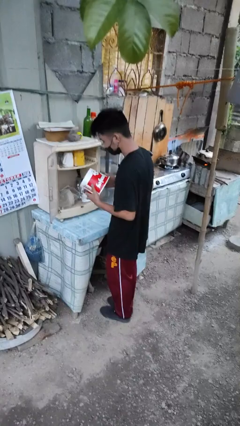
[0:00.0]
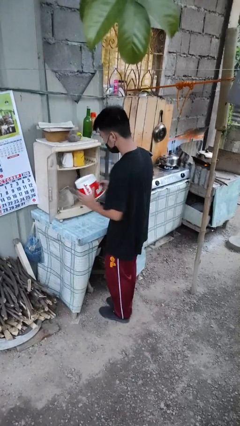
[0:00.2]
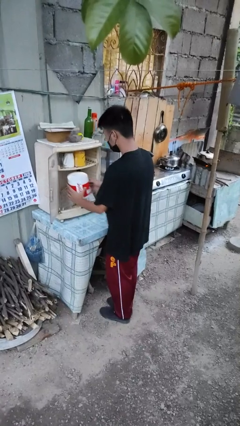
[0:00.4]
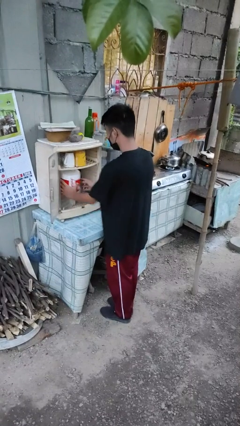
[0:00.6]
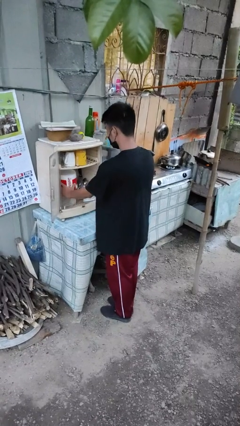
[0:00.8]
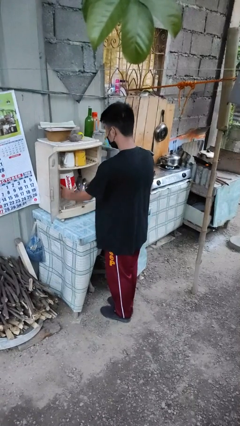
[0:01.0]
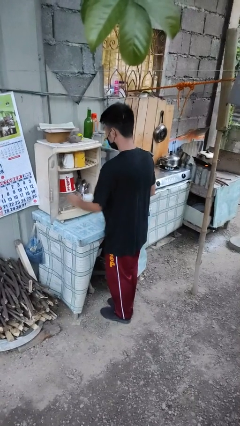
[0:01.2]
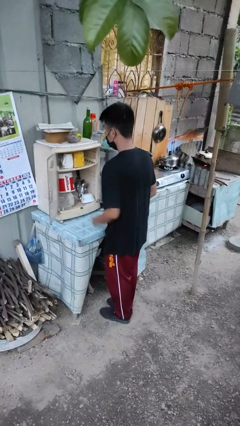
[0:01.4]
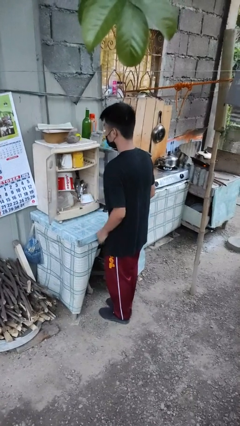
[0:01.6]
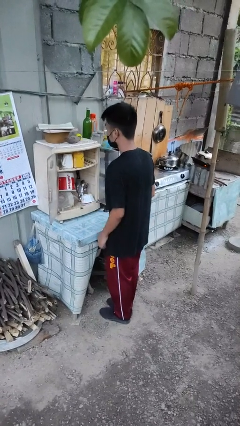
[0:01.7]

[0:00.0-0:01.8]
person puts down object into cabinet

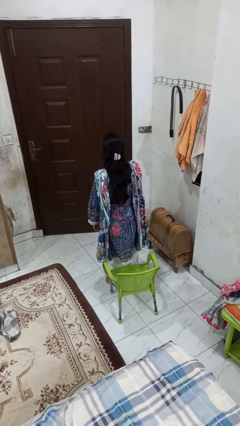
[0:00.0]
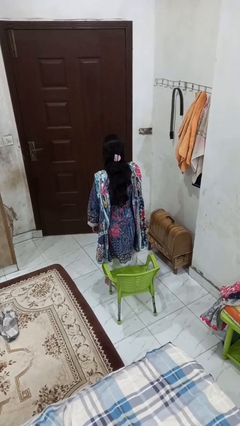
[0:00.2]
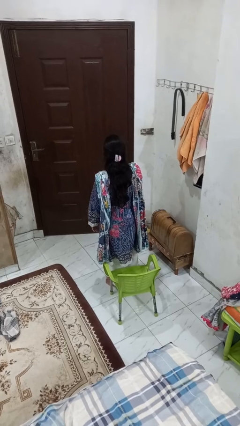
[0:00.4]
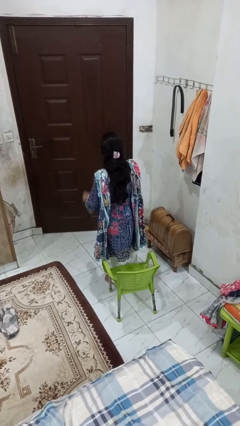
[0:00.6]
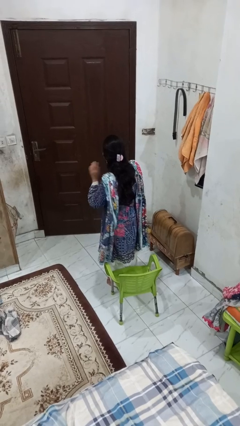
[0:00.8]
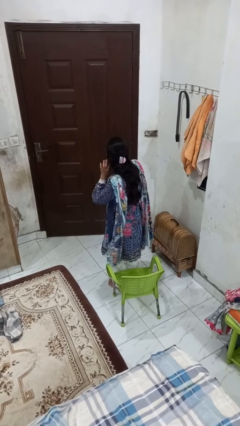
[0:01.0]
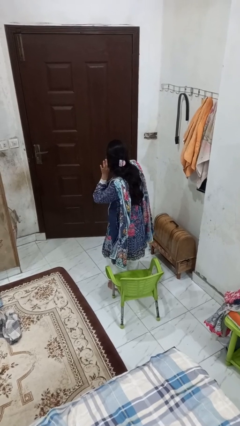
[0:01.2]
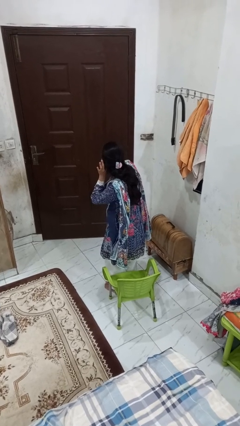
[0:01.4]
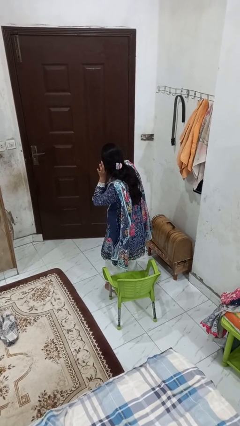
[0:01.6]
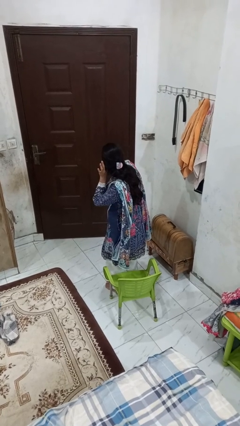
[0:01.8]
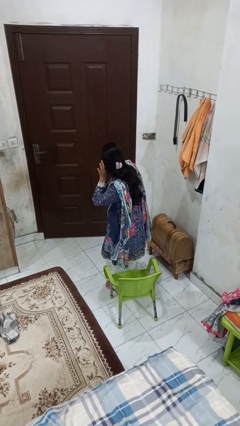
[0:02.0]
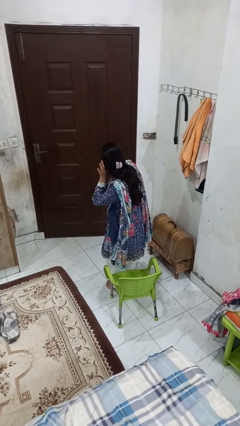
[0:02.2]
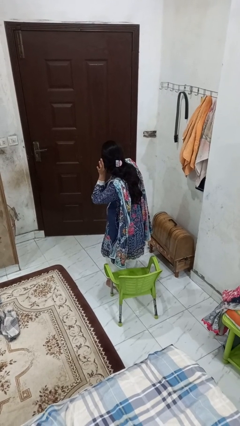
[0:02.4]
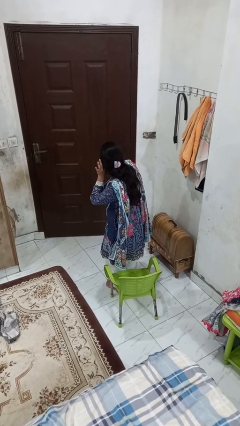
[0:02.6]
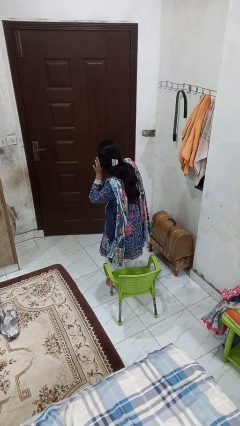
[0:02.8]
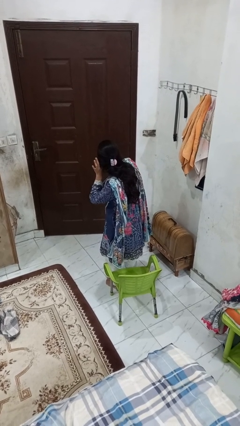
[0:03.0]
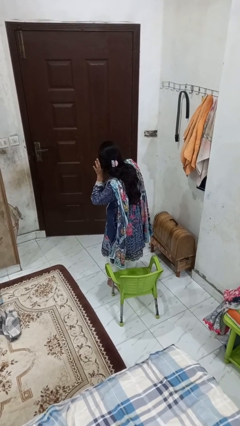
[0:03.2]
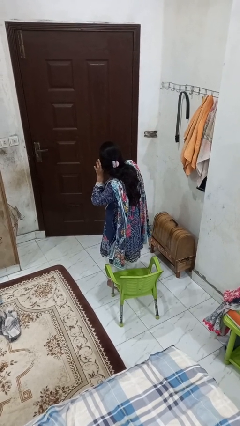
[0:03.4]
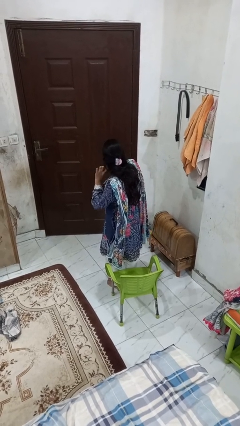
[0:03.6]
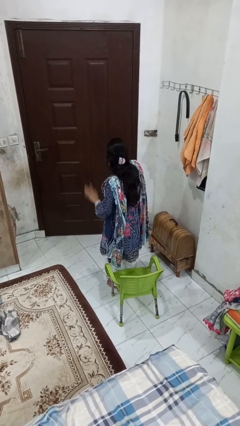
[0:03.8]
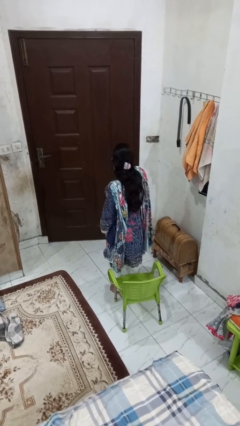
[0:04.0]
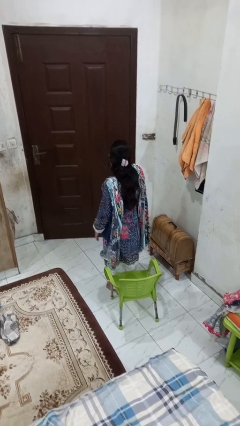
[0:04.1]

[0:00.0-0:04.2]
person gestures listen closely

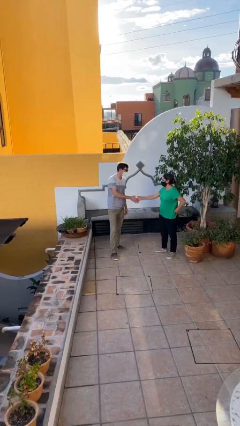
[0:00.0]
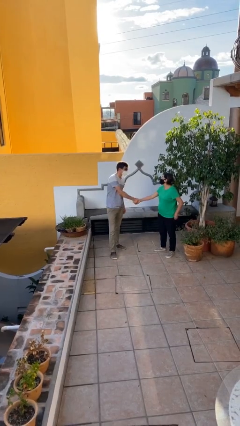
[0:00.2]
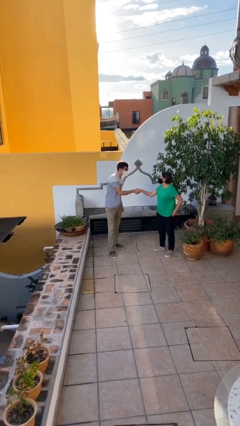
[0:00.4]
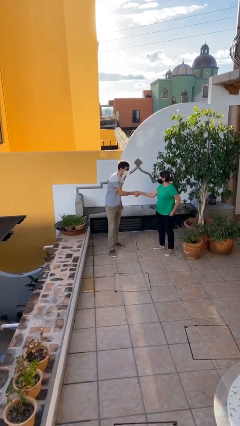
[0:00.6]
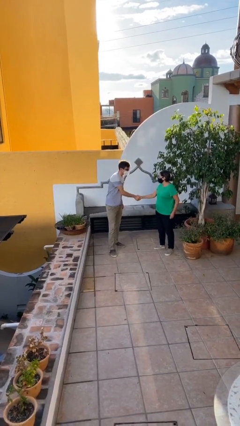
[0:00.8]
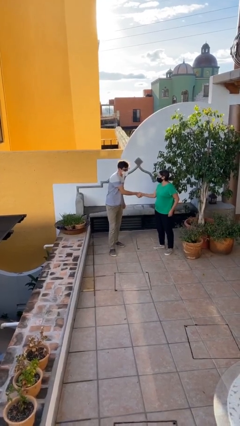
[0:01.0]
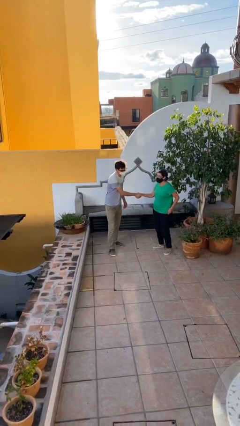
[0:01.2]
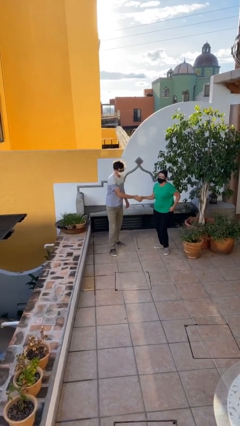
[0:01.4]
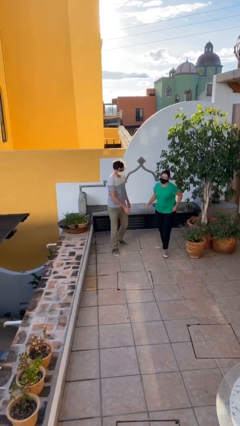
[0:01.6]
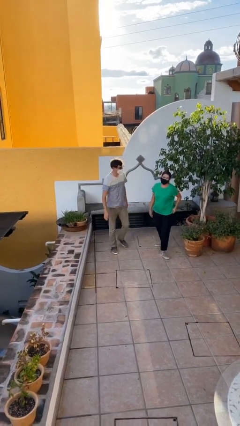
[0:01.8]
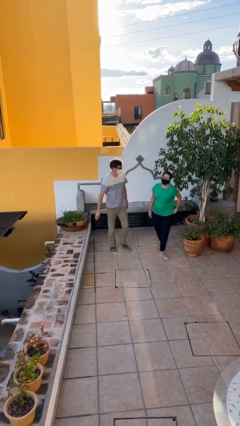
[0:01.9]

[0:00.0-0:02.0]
person shakes hand

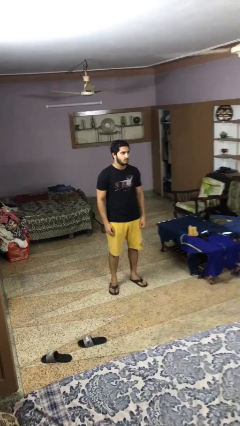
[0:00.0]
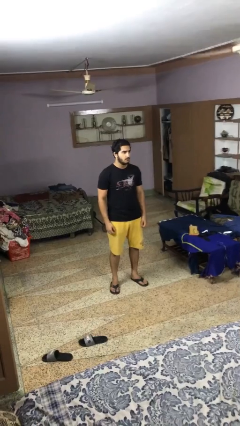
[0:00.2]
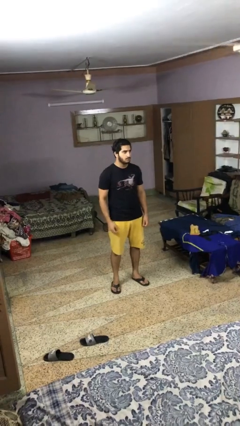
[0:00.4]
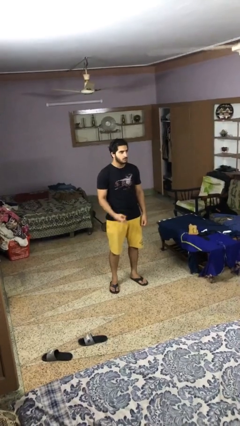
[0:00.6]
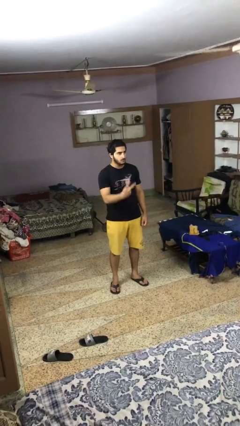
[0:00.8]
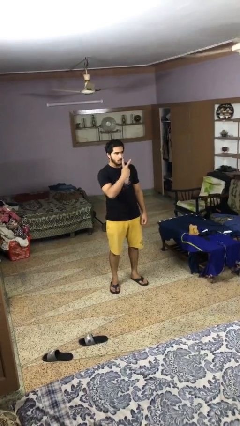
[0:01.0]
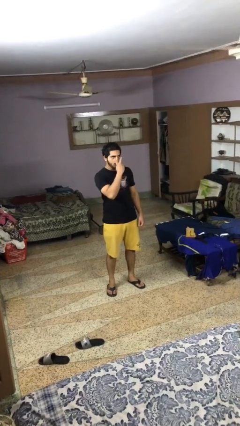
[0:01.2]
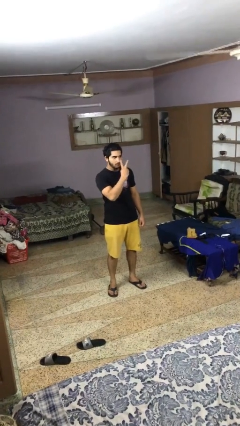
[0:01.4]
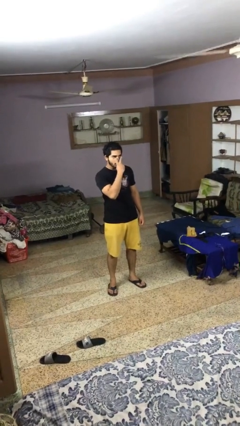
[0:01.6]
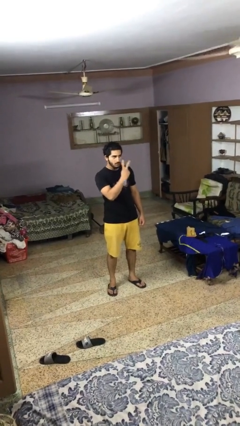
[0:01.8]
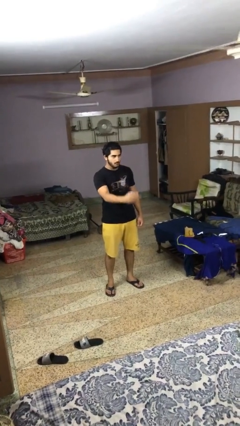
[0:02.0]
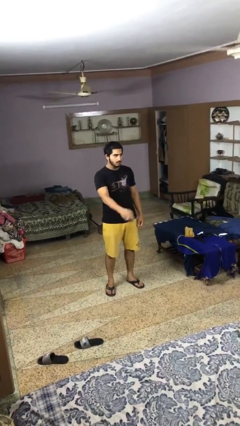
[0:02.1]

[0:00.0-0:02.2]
person gestures watch closely

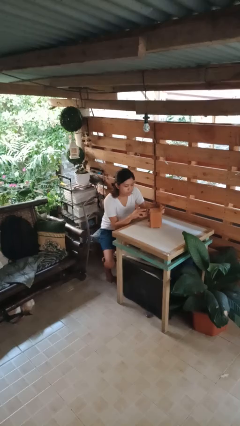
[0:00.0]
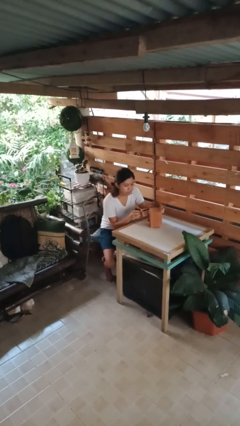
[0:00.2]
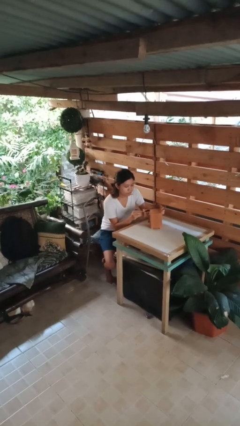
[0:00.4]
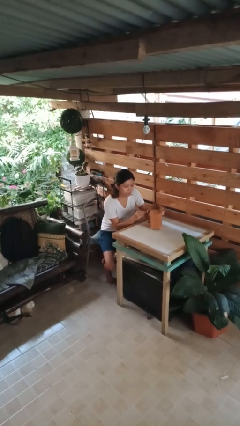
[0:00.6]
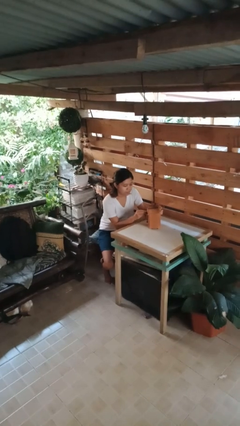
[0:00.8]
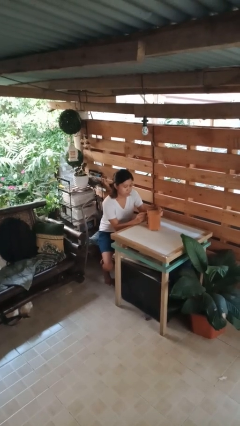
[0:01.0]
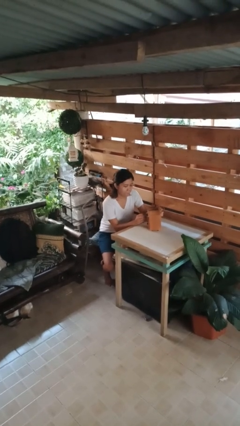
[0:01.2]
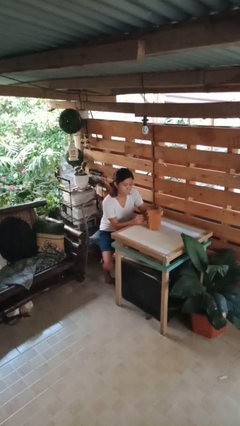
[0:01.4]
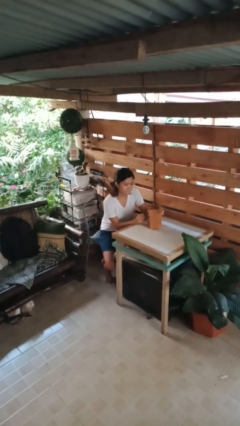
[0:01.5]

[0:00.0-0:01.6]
person closes jewelry box

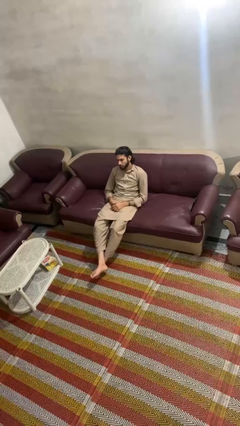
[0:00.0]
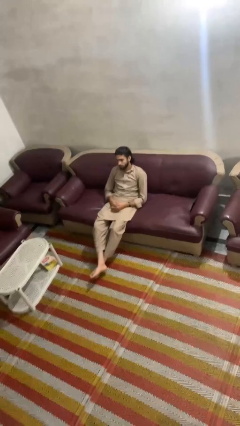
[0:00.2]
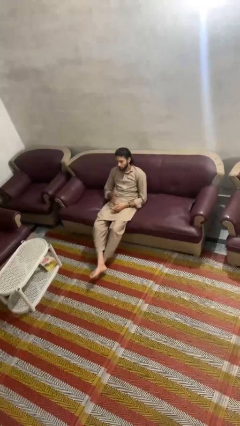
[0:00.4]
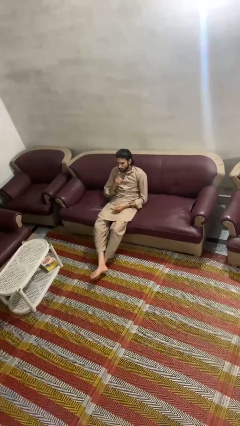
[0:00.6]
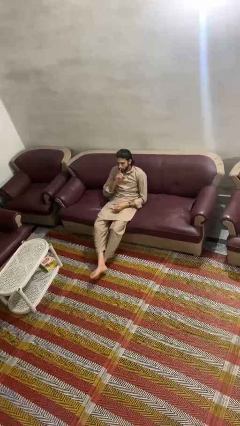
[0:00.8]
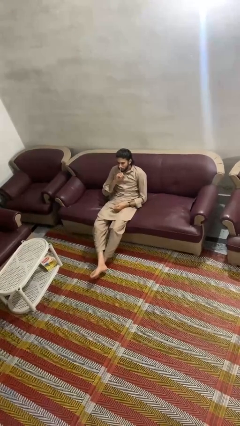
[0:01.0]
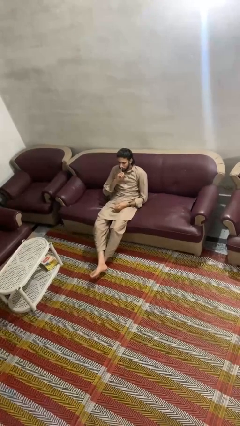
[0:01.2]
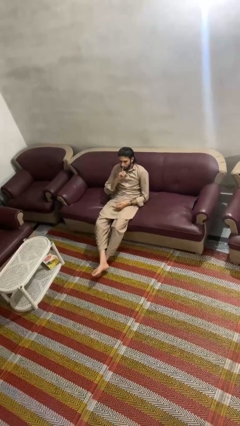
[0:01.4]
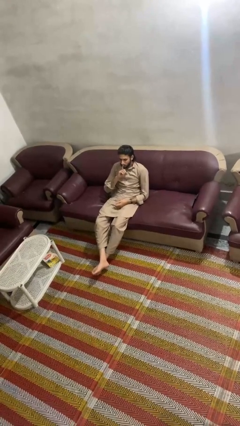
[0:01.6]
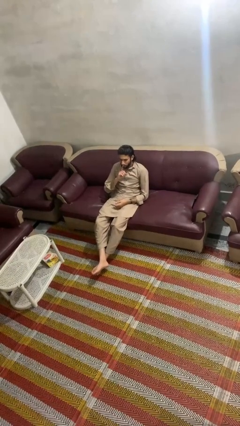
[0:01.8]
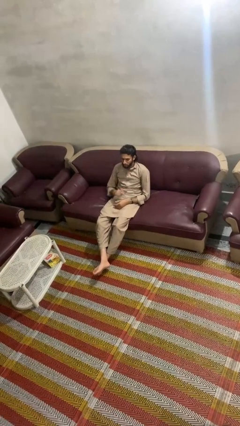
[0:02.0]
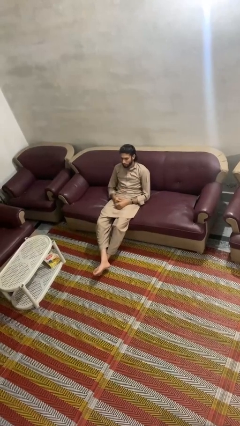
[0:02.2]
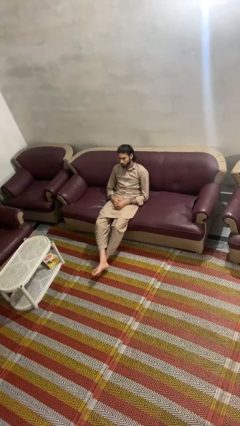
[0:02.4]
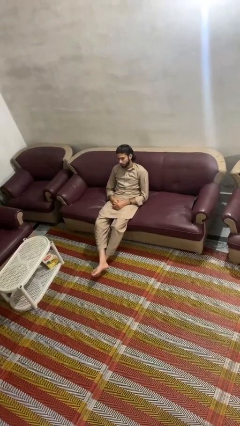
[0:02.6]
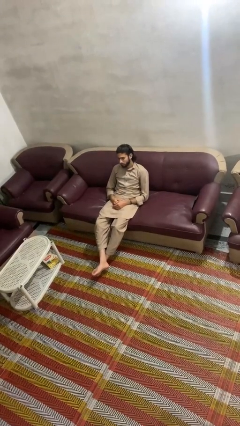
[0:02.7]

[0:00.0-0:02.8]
person gestures be quiet

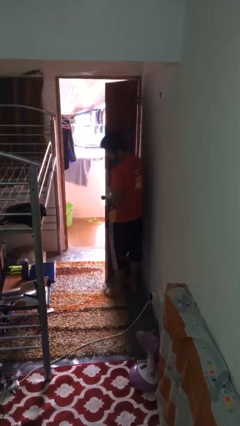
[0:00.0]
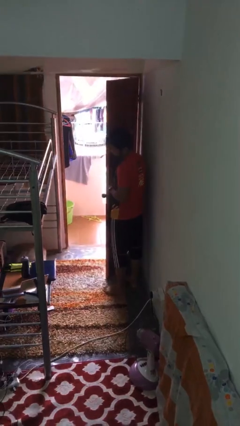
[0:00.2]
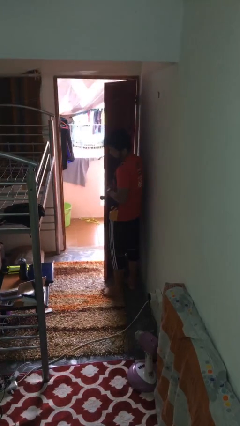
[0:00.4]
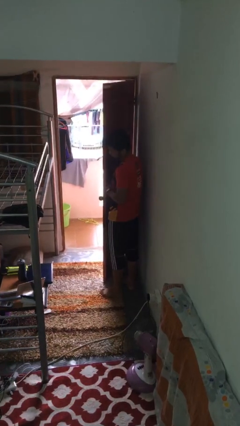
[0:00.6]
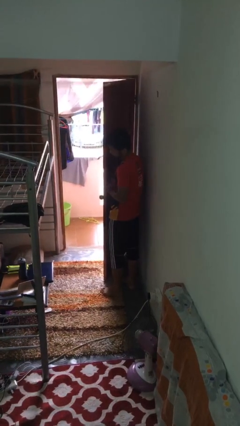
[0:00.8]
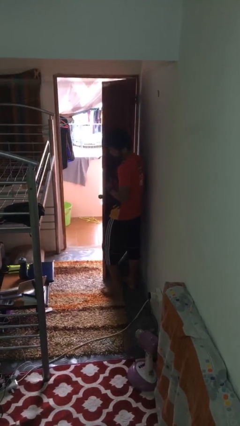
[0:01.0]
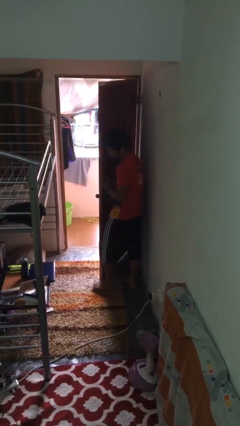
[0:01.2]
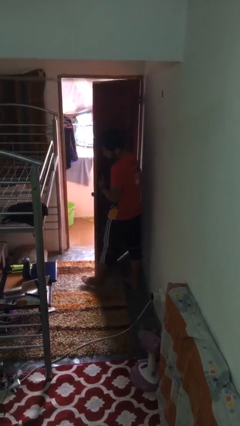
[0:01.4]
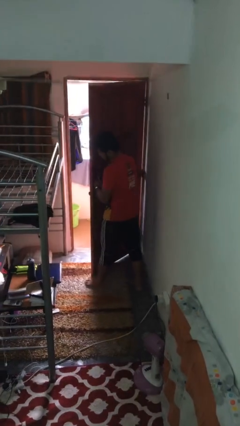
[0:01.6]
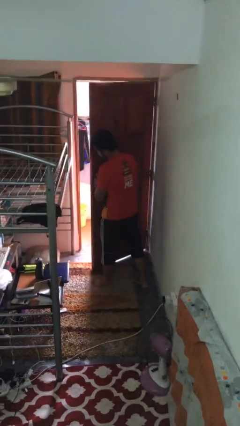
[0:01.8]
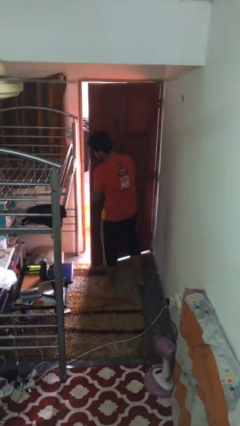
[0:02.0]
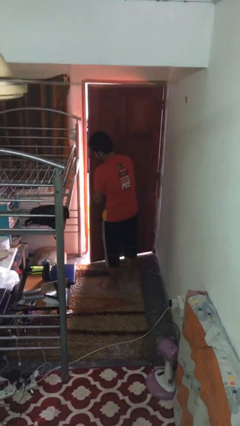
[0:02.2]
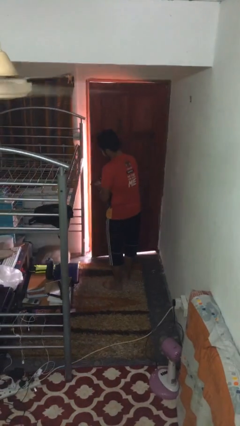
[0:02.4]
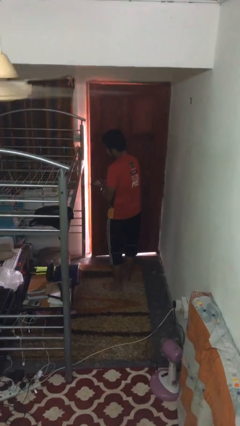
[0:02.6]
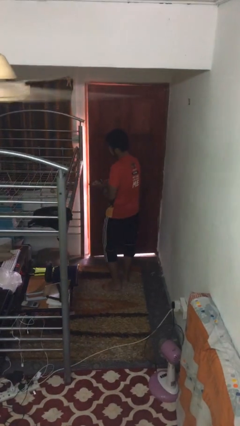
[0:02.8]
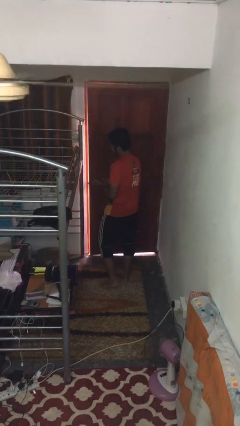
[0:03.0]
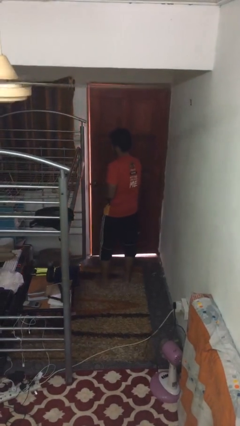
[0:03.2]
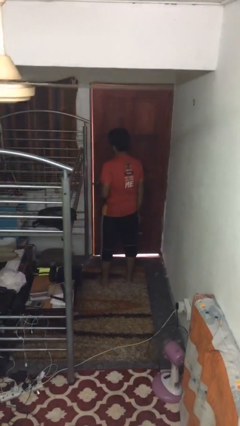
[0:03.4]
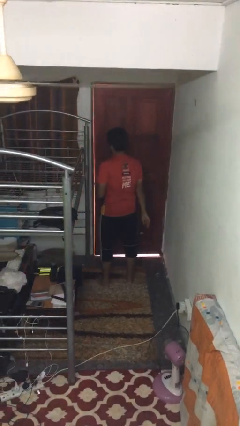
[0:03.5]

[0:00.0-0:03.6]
person closes facility door
